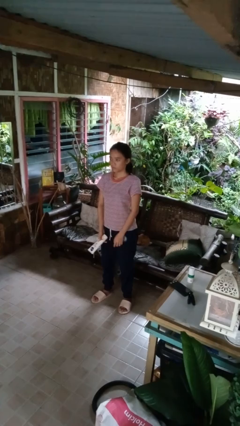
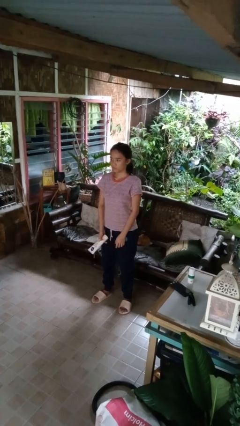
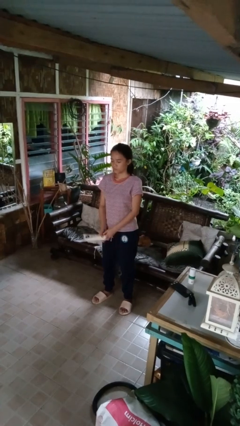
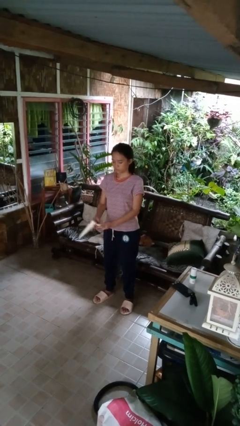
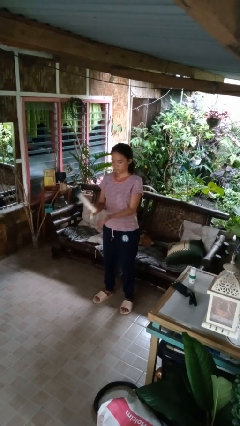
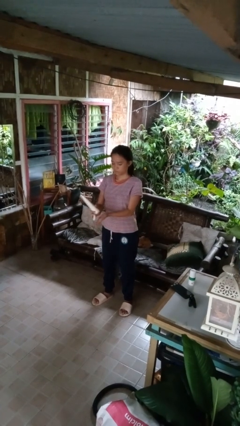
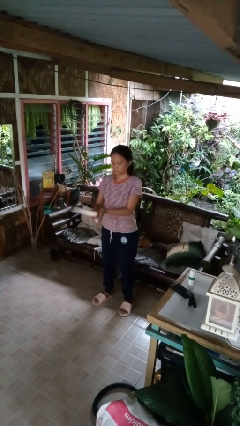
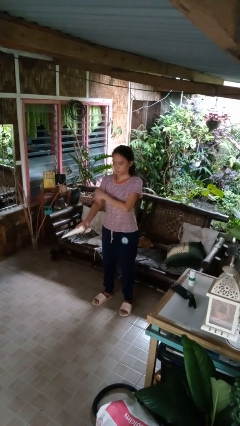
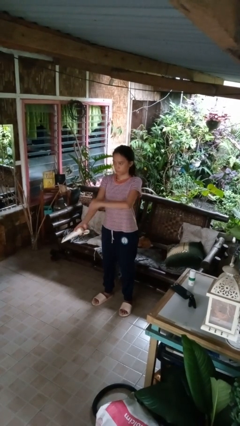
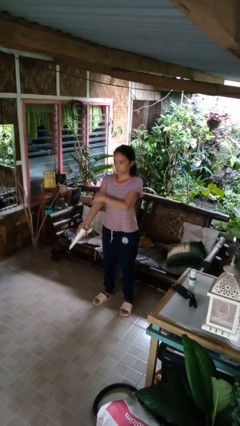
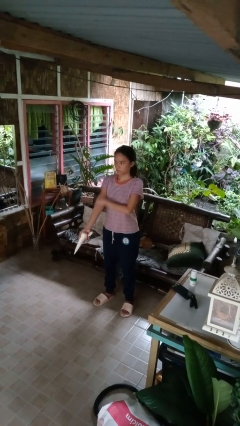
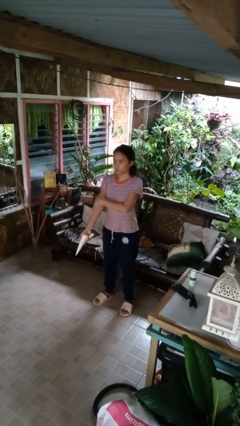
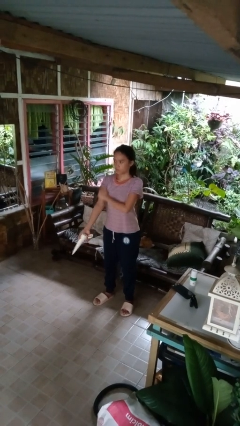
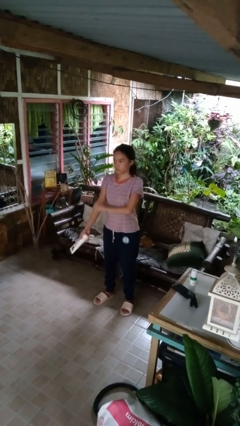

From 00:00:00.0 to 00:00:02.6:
person applies sunscreen

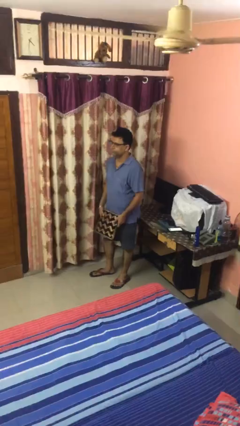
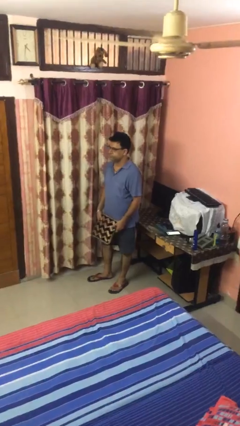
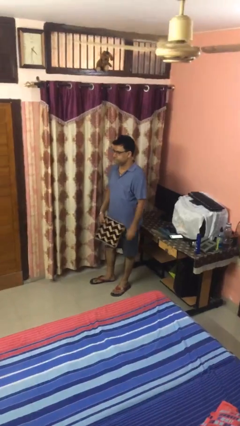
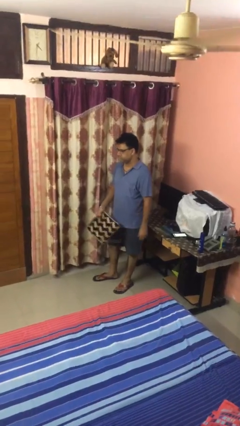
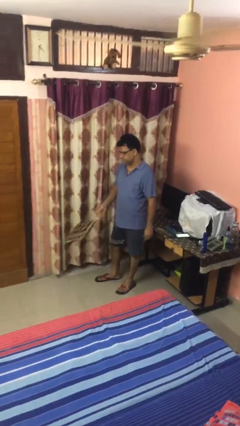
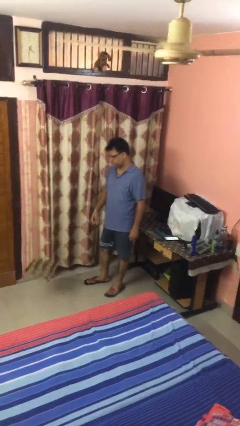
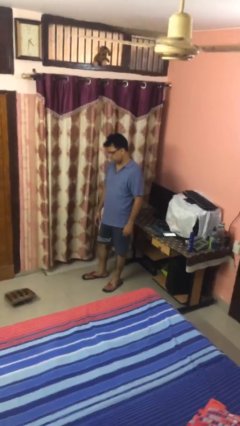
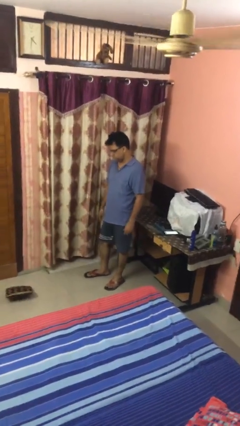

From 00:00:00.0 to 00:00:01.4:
person throws object to ground

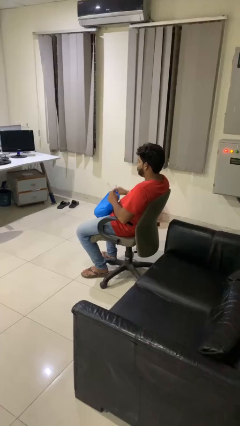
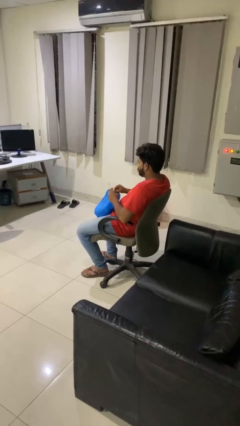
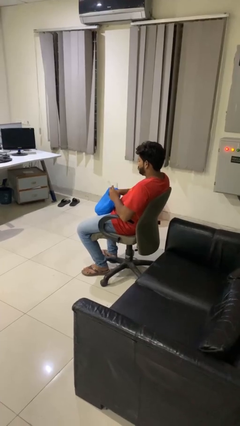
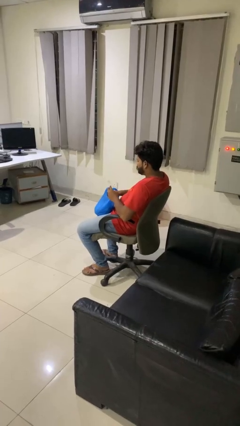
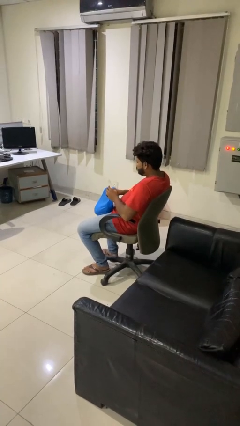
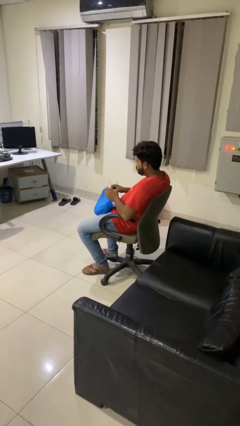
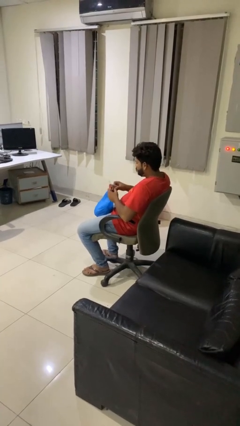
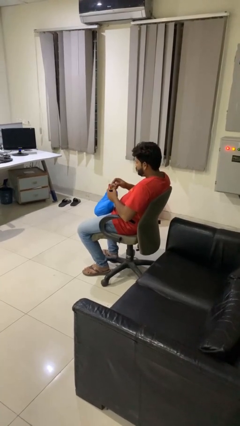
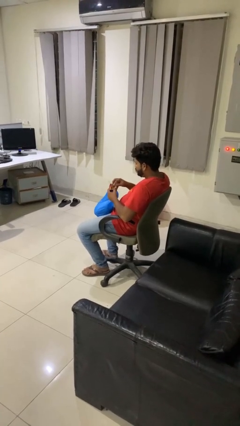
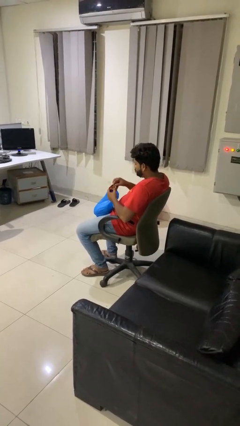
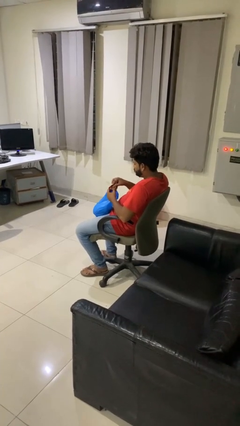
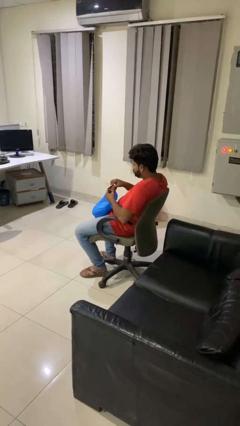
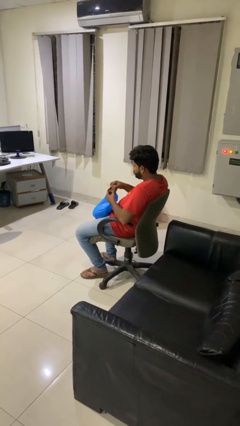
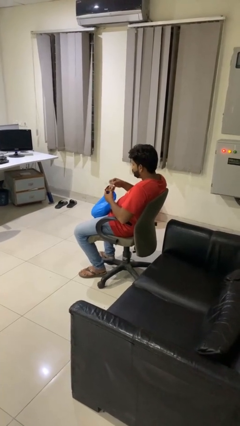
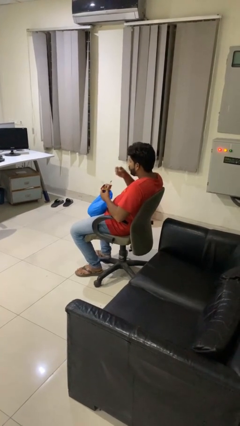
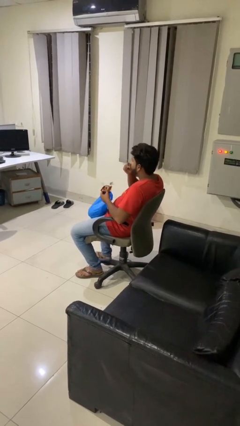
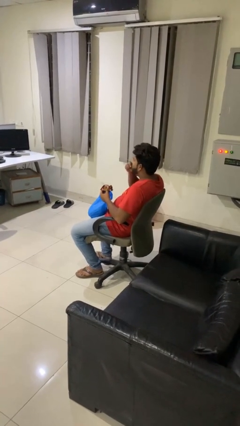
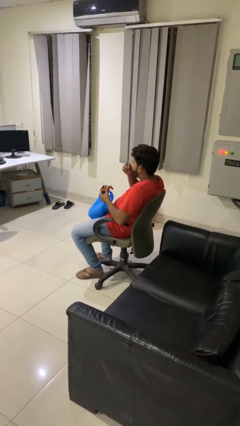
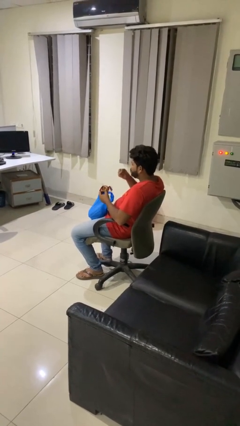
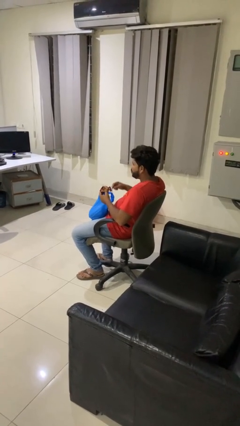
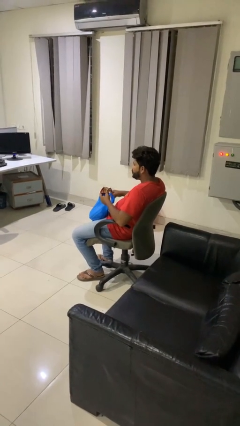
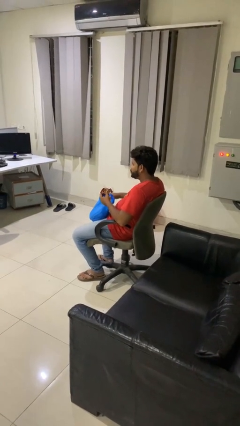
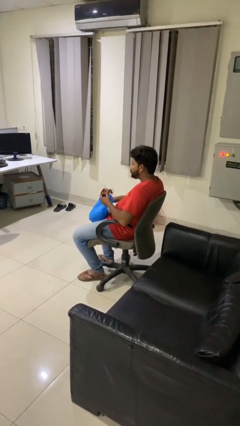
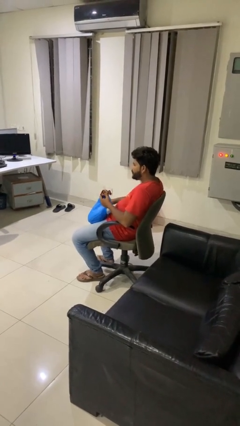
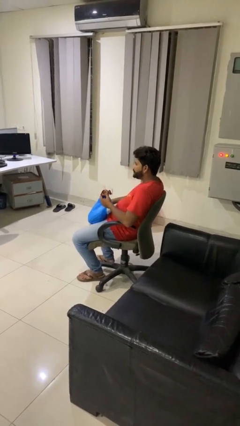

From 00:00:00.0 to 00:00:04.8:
person eats snack from bag

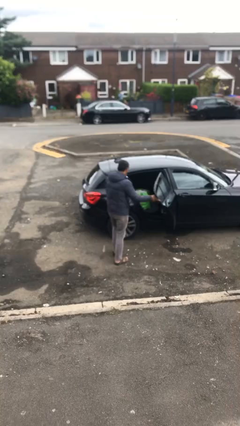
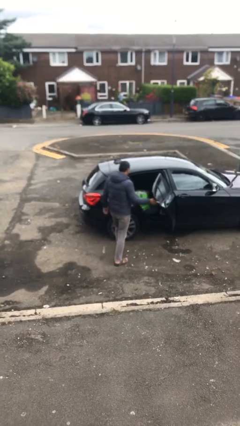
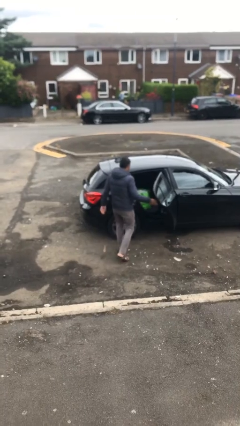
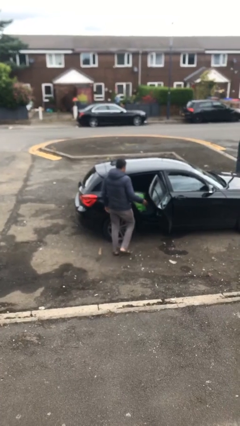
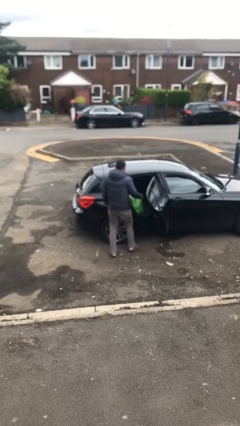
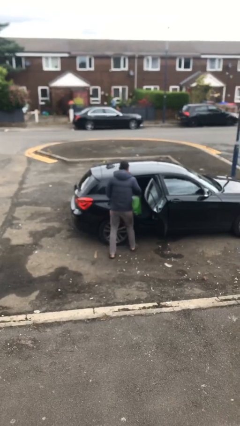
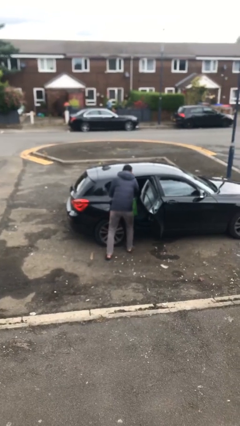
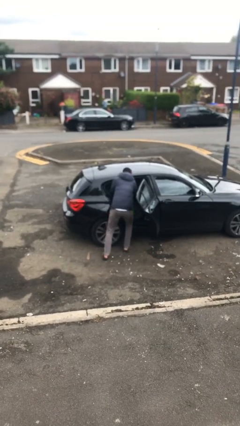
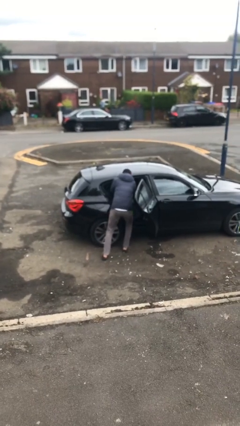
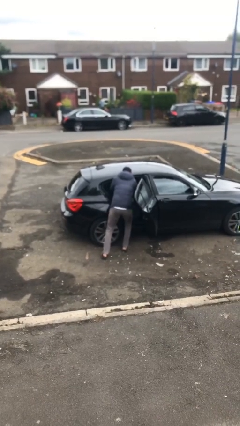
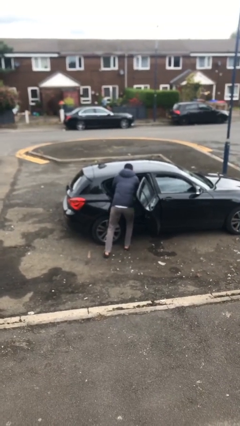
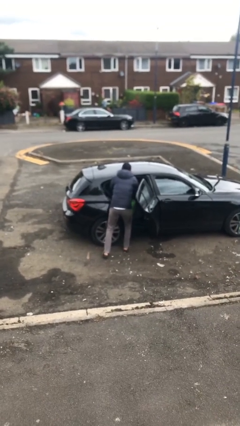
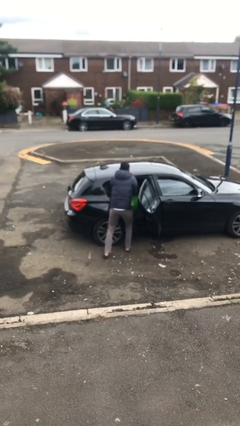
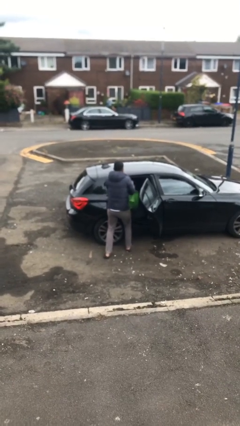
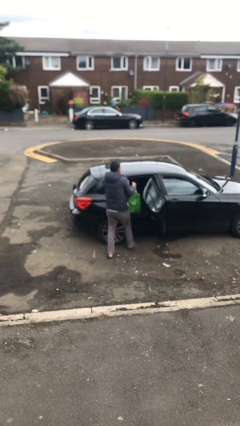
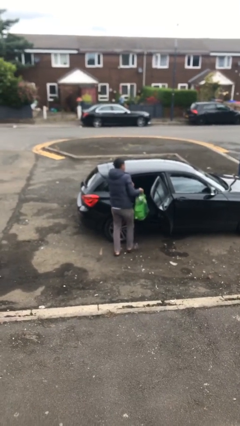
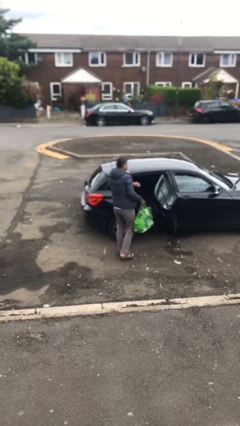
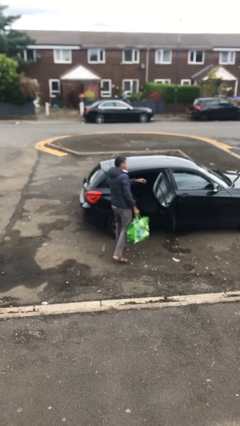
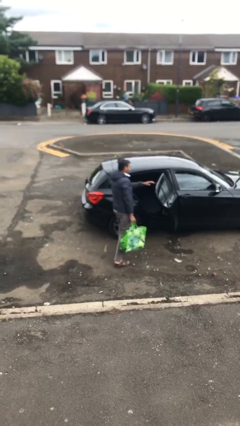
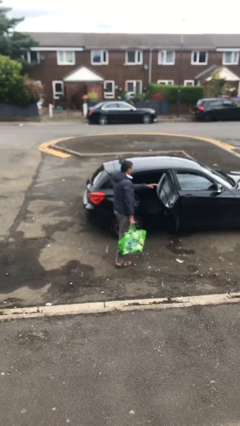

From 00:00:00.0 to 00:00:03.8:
person unloads car

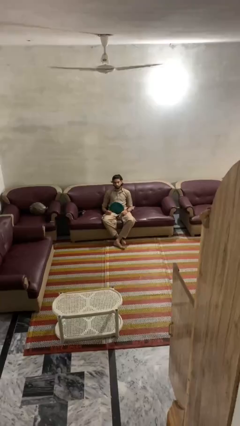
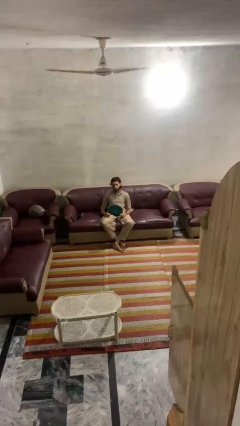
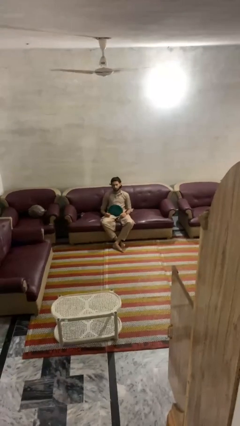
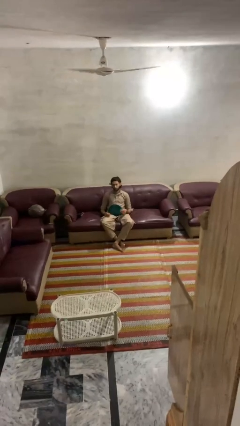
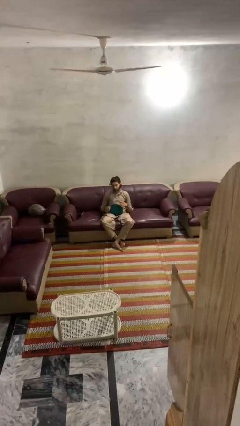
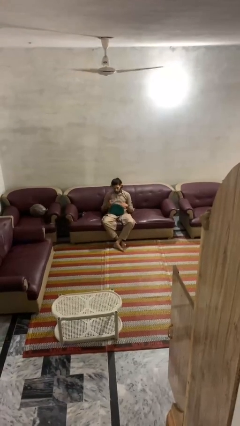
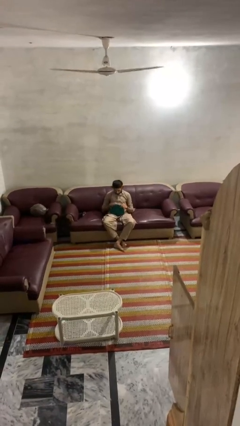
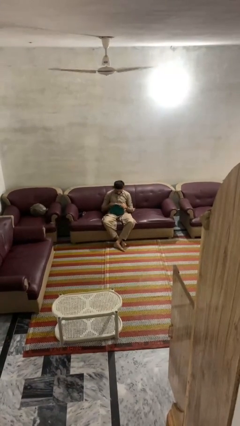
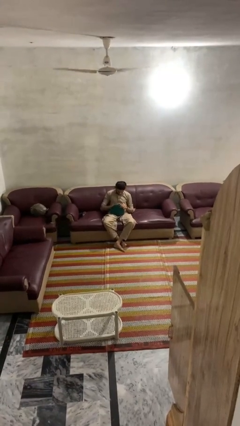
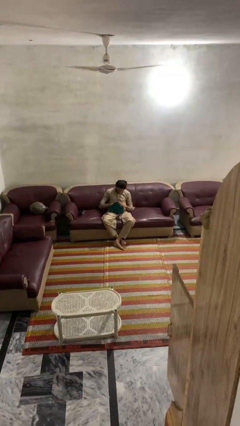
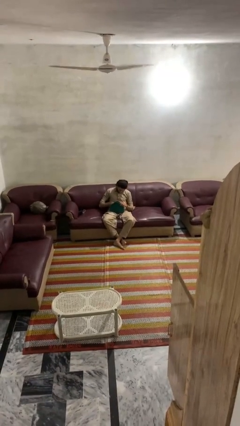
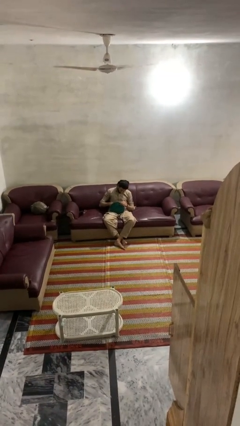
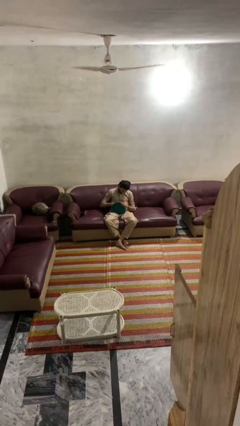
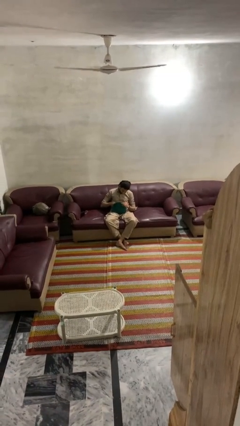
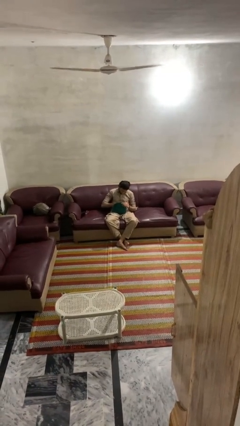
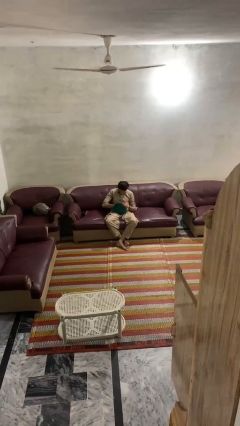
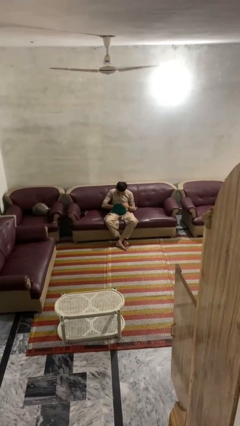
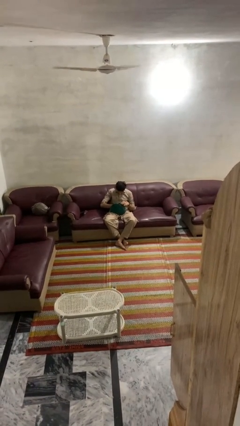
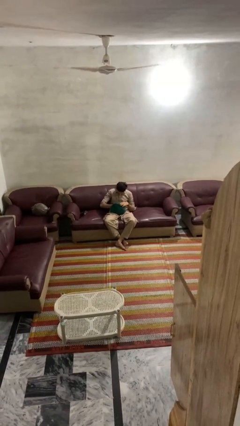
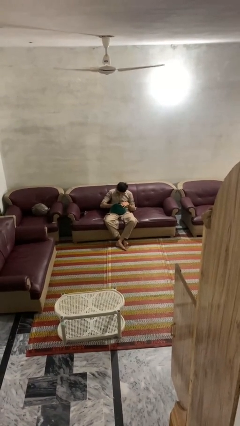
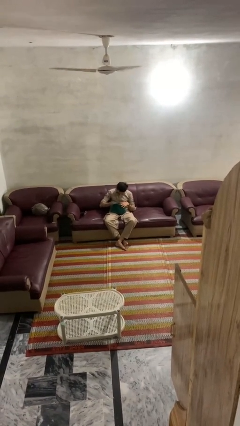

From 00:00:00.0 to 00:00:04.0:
person searches in purse

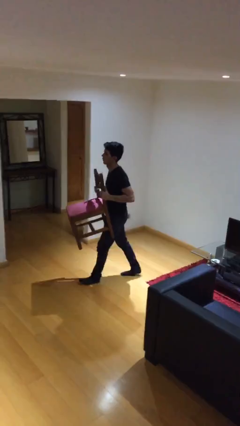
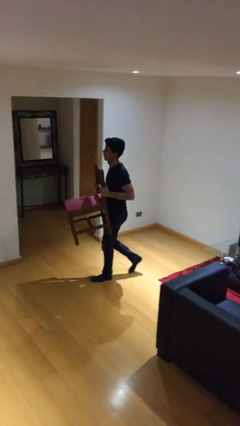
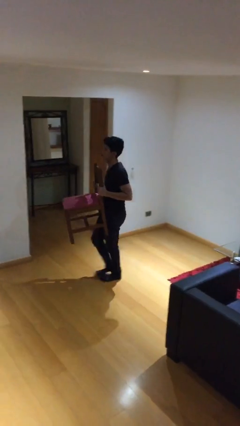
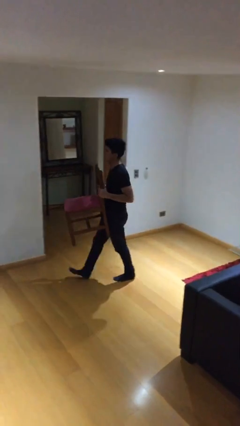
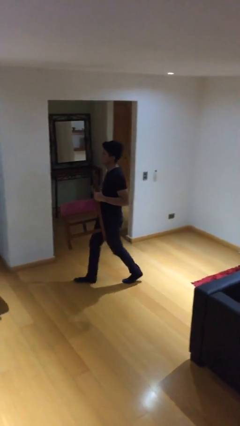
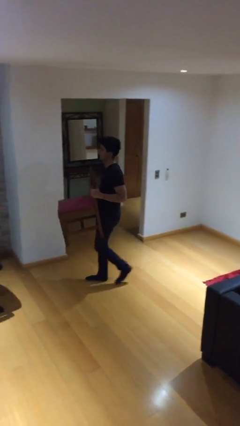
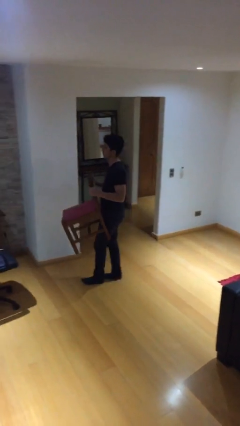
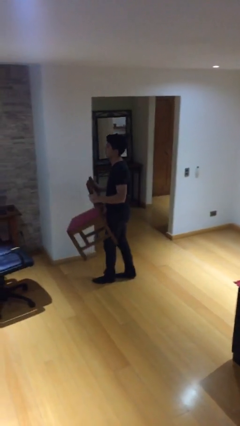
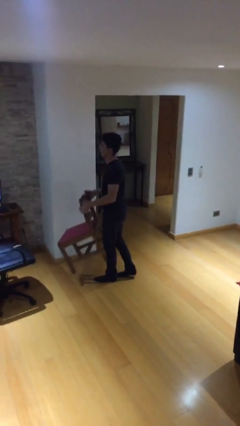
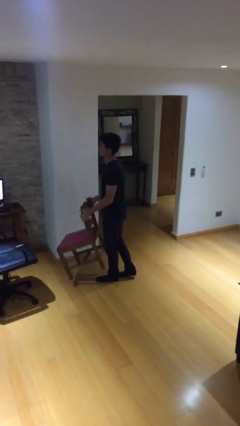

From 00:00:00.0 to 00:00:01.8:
person carries heavy object
